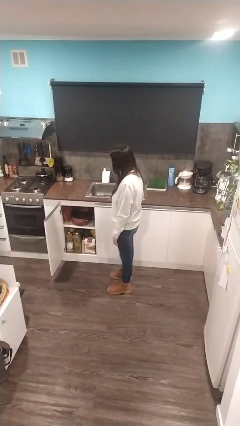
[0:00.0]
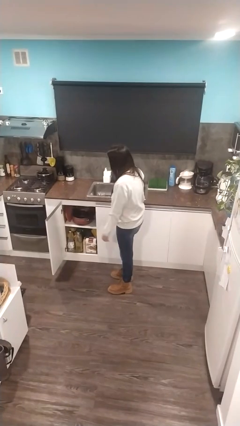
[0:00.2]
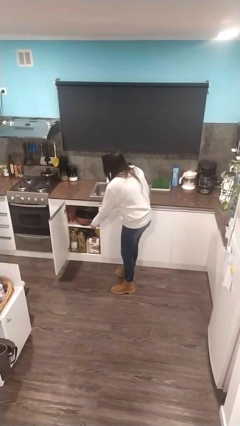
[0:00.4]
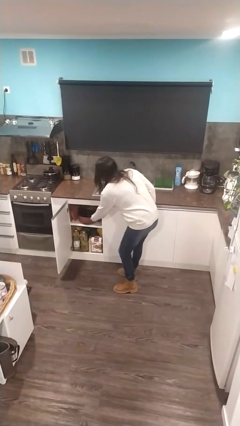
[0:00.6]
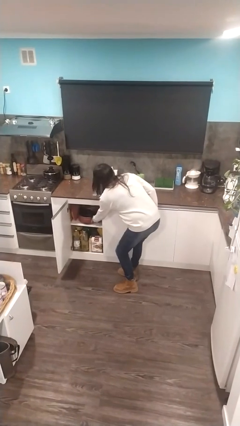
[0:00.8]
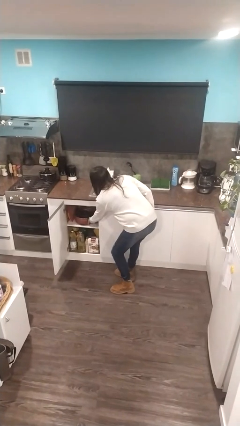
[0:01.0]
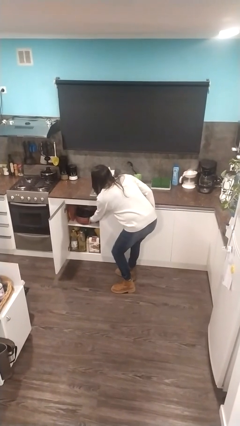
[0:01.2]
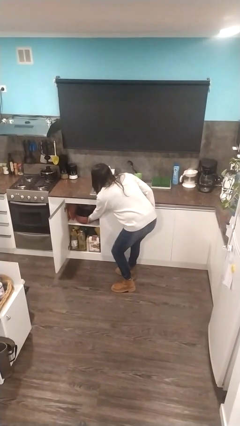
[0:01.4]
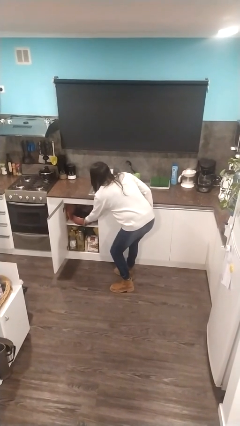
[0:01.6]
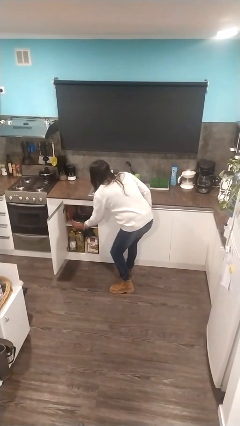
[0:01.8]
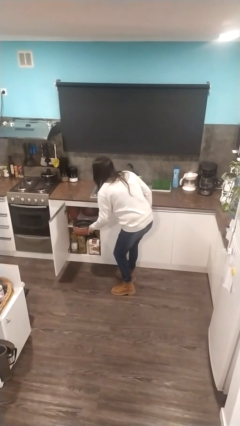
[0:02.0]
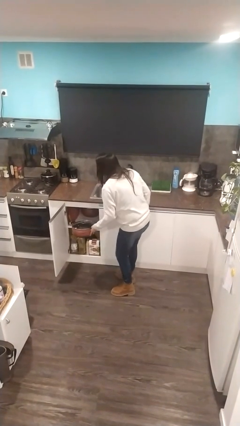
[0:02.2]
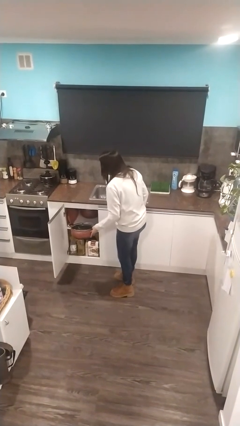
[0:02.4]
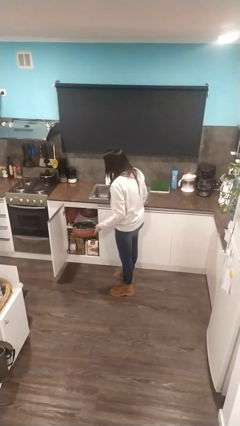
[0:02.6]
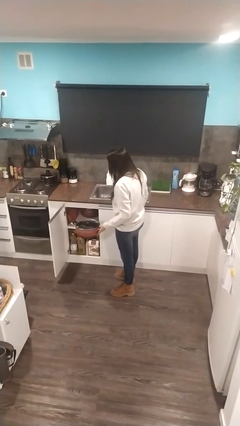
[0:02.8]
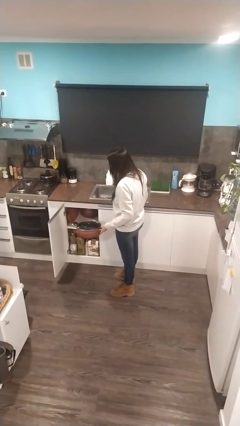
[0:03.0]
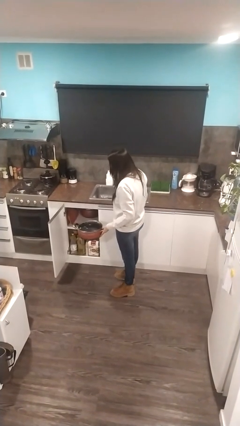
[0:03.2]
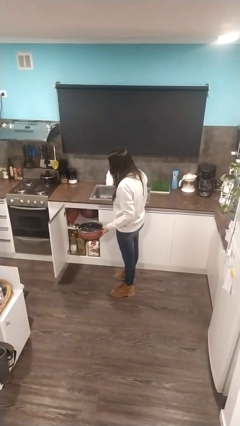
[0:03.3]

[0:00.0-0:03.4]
person picks up object from cabinet

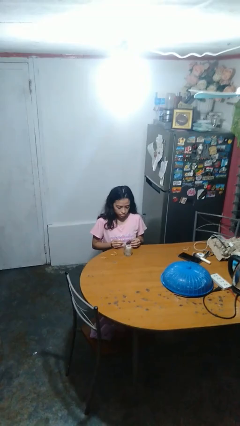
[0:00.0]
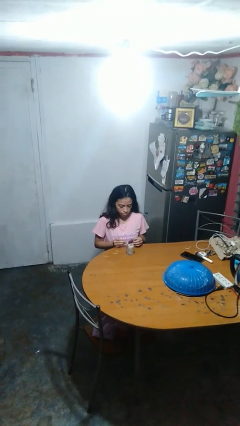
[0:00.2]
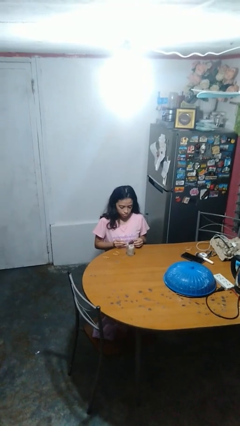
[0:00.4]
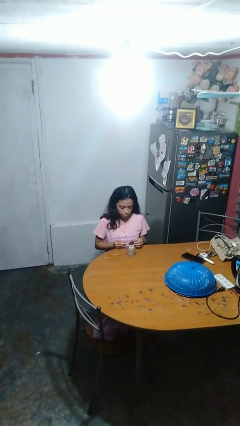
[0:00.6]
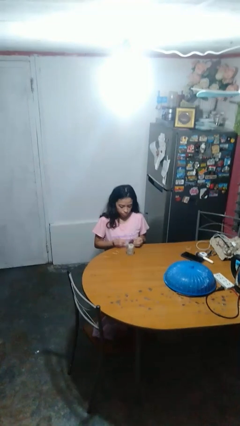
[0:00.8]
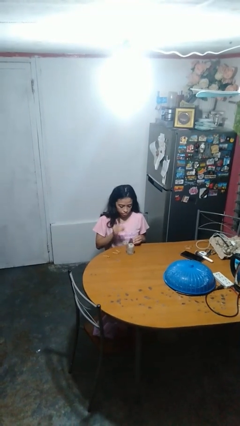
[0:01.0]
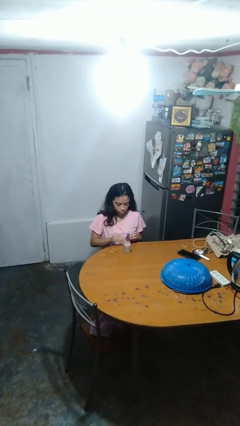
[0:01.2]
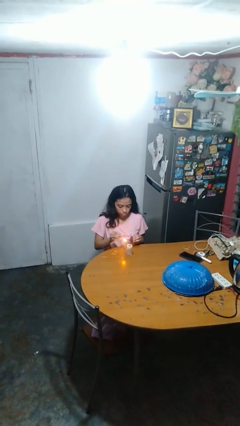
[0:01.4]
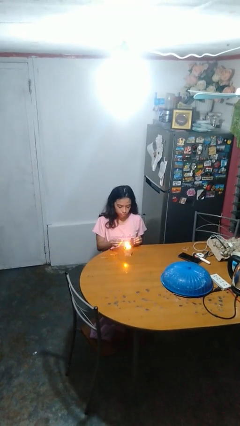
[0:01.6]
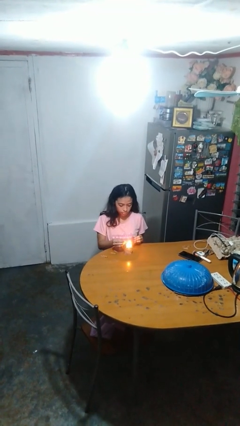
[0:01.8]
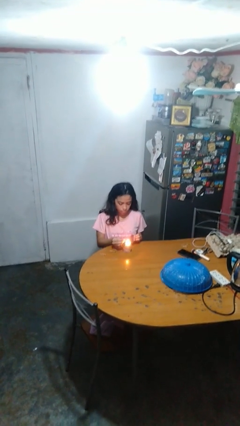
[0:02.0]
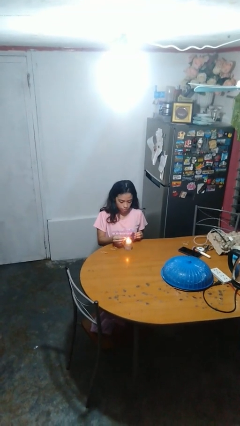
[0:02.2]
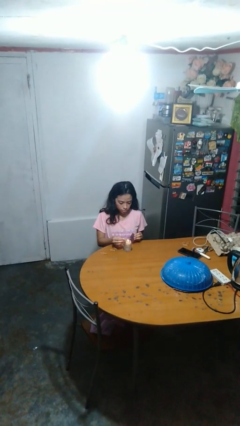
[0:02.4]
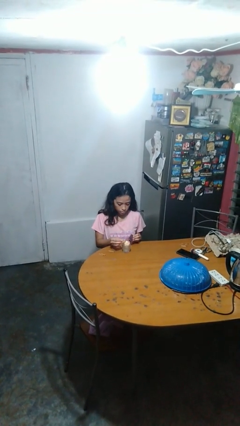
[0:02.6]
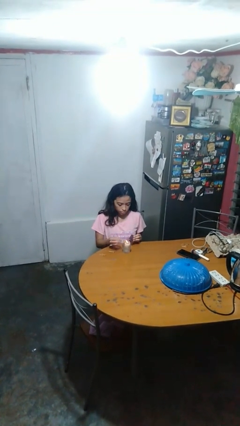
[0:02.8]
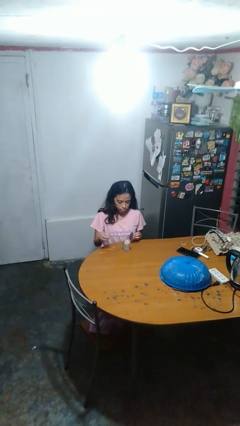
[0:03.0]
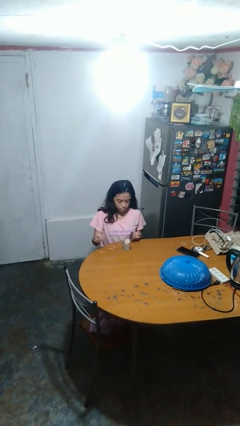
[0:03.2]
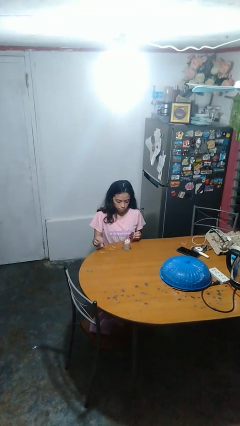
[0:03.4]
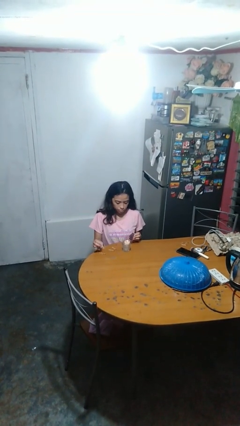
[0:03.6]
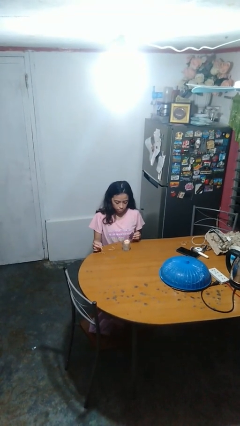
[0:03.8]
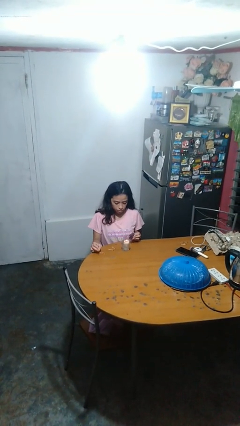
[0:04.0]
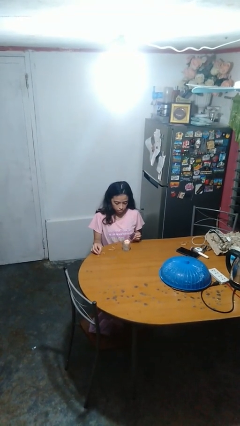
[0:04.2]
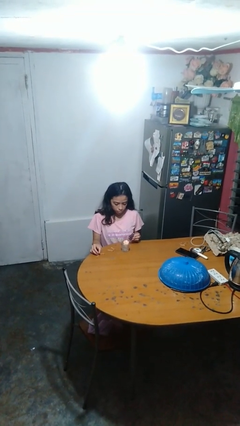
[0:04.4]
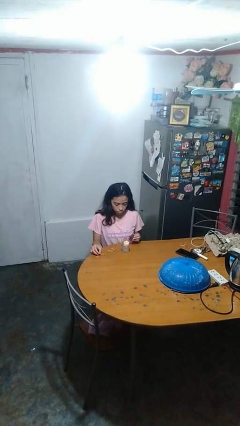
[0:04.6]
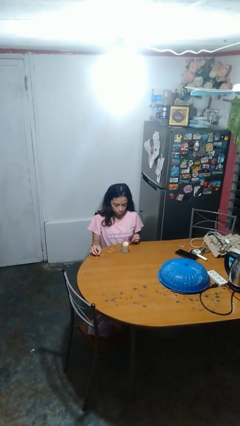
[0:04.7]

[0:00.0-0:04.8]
person lights candle

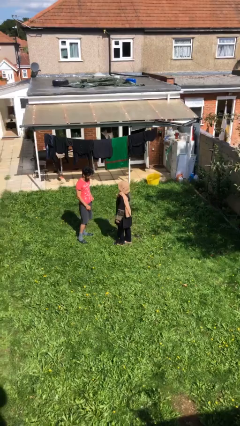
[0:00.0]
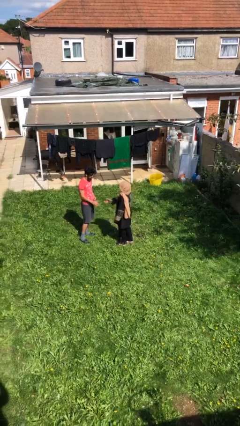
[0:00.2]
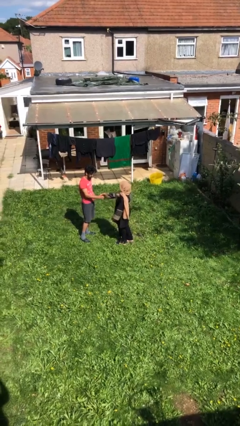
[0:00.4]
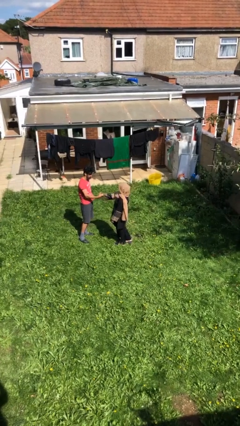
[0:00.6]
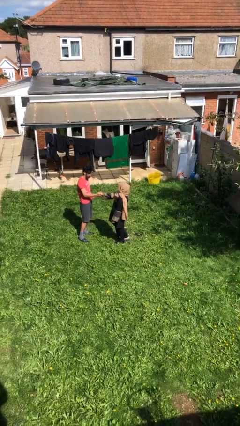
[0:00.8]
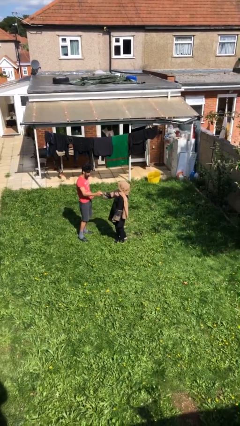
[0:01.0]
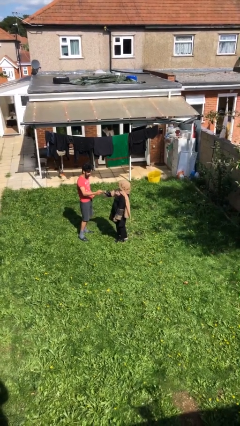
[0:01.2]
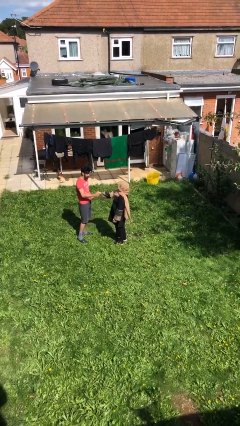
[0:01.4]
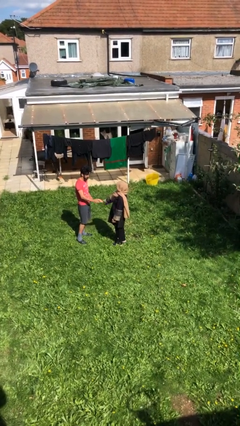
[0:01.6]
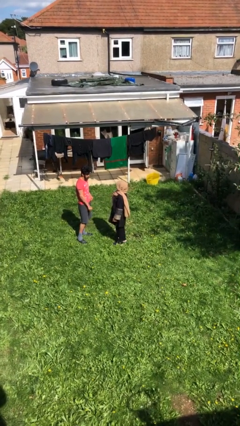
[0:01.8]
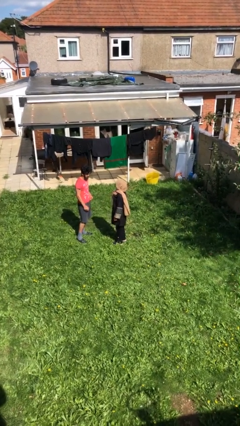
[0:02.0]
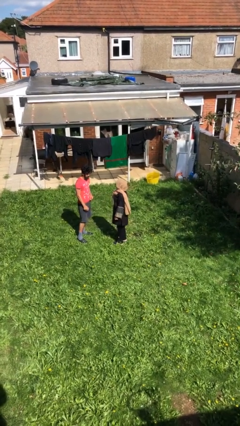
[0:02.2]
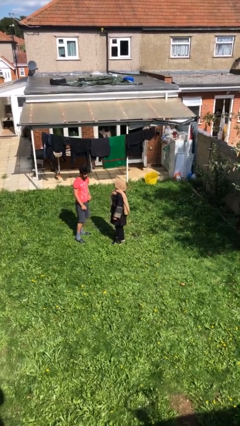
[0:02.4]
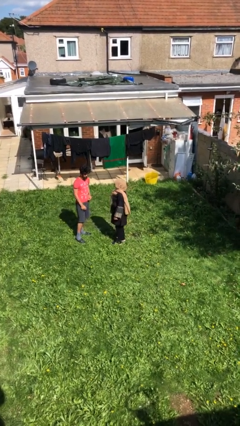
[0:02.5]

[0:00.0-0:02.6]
person shakes hand

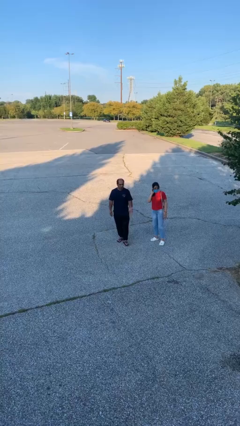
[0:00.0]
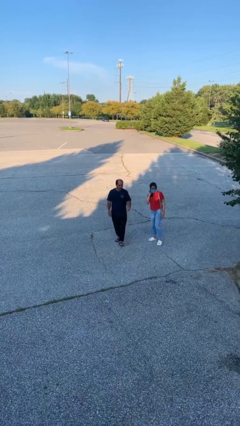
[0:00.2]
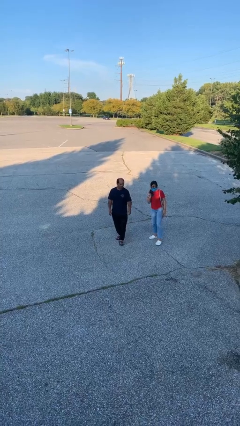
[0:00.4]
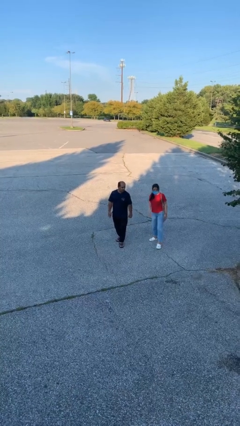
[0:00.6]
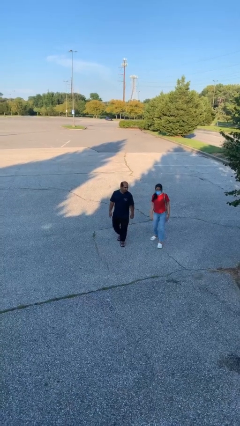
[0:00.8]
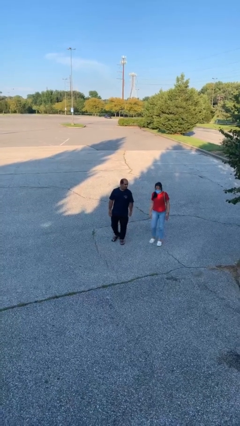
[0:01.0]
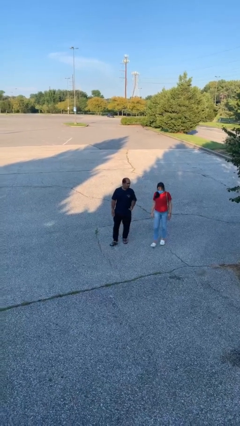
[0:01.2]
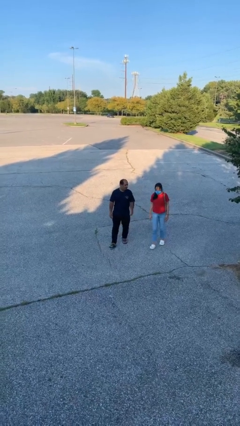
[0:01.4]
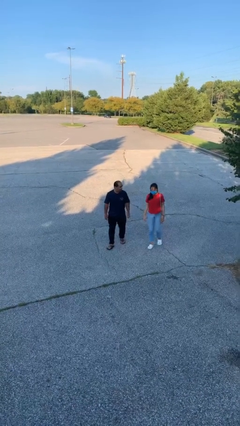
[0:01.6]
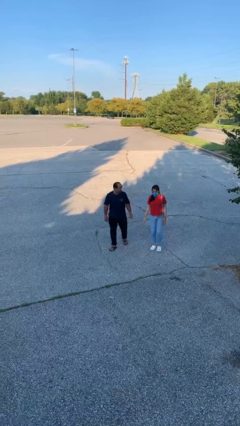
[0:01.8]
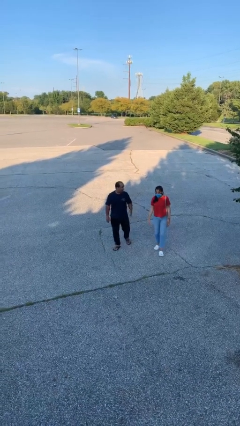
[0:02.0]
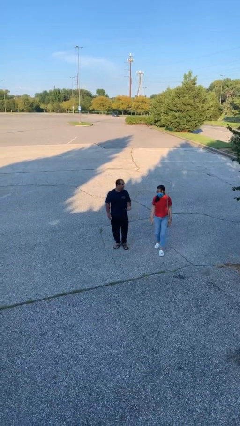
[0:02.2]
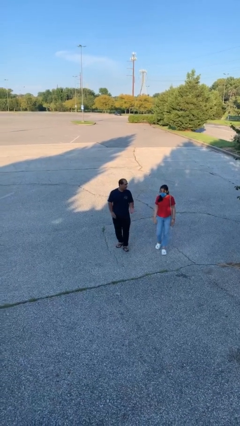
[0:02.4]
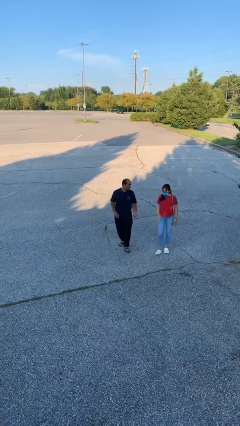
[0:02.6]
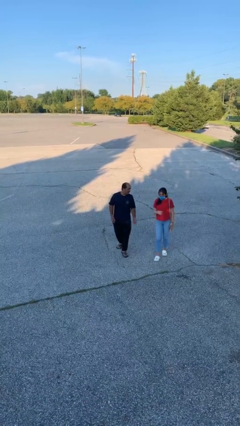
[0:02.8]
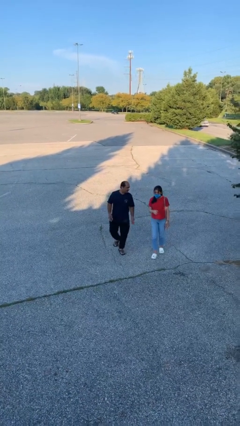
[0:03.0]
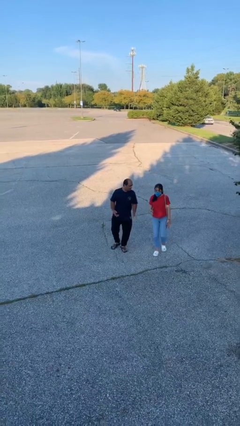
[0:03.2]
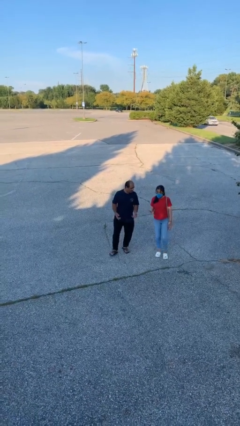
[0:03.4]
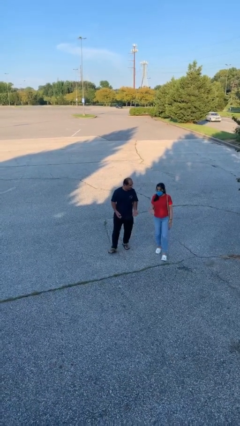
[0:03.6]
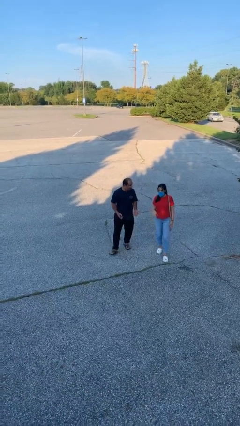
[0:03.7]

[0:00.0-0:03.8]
person talks to person

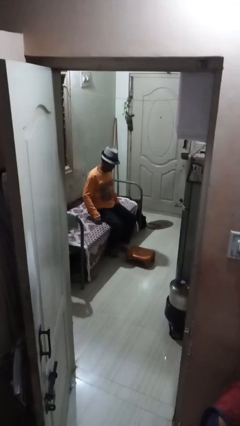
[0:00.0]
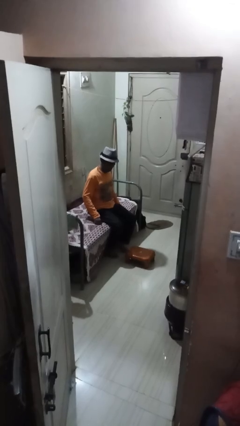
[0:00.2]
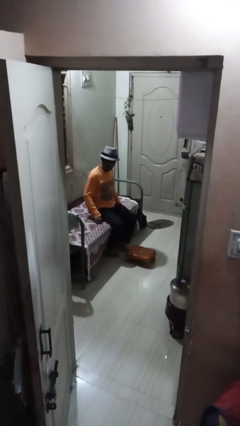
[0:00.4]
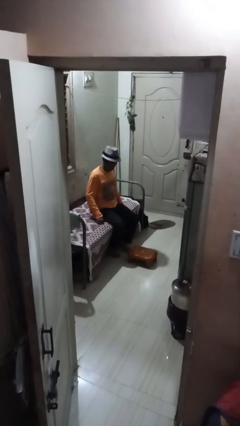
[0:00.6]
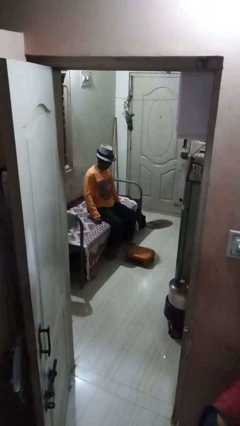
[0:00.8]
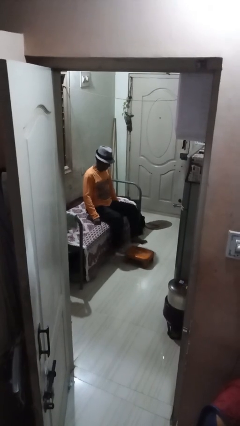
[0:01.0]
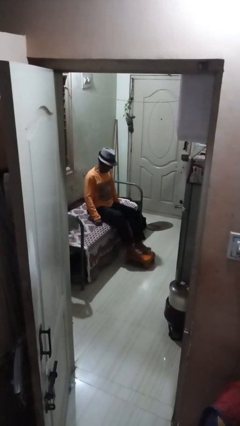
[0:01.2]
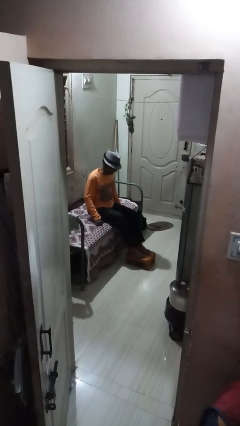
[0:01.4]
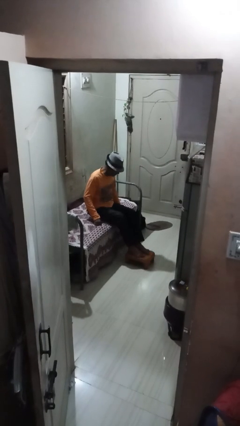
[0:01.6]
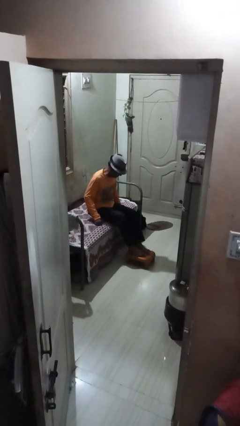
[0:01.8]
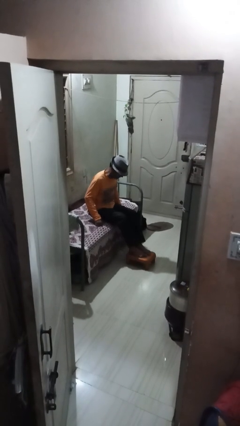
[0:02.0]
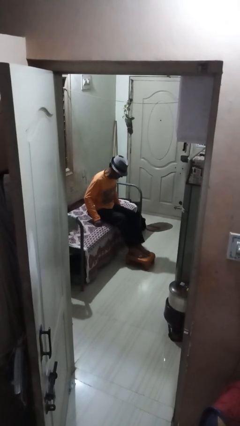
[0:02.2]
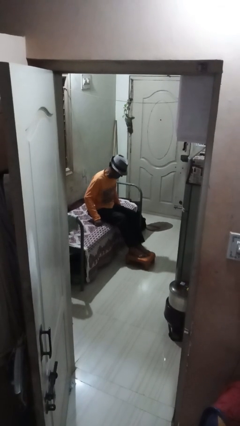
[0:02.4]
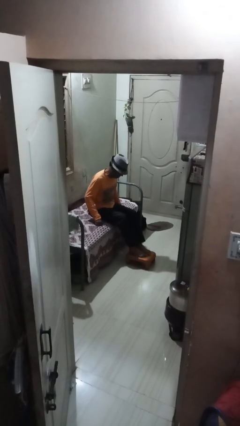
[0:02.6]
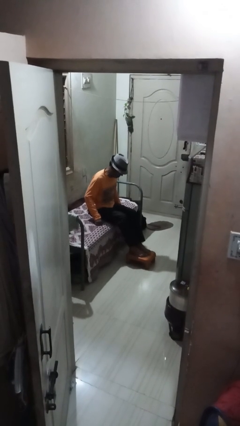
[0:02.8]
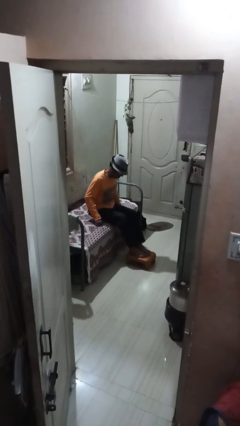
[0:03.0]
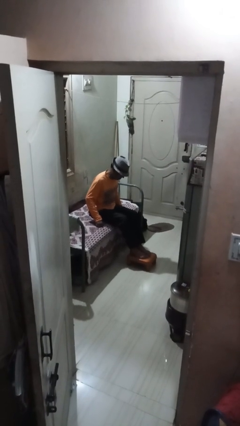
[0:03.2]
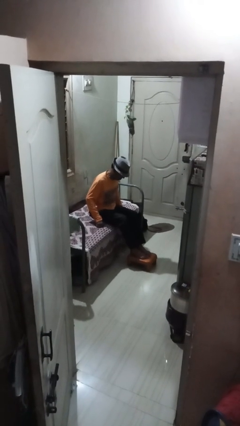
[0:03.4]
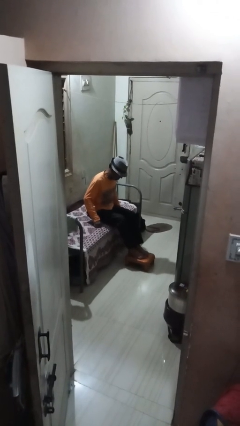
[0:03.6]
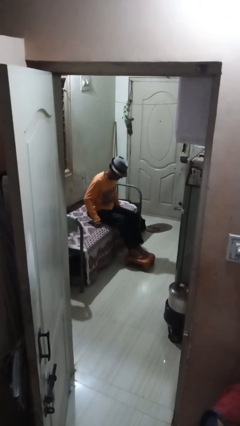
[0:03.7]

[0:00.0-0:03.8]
person puts feet up
